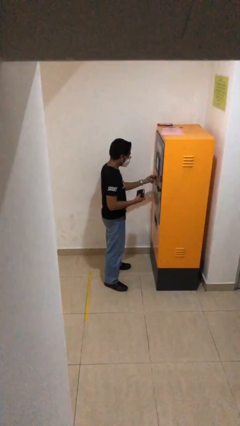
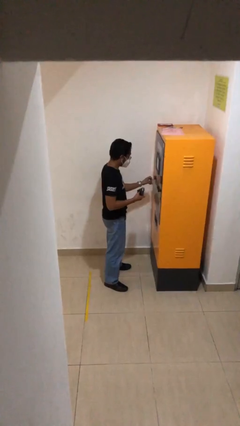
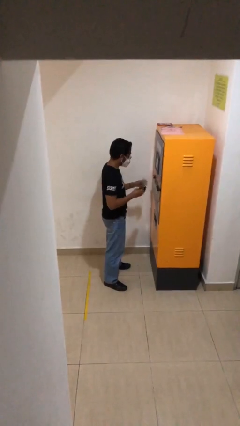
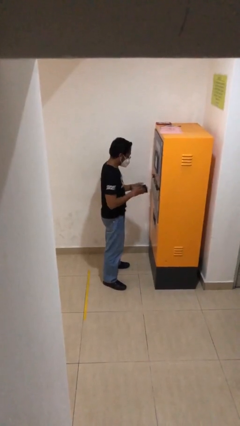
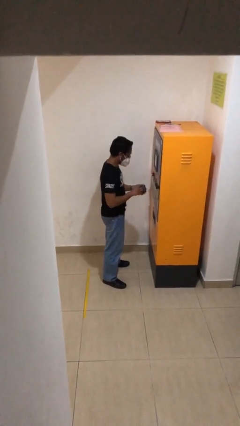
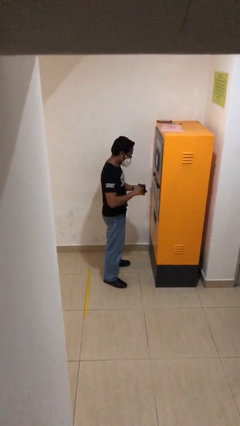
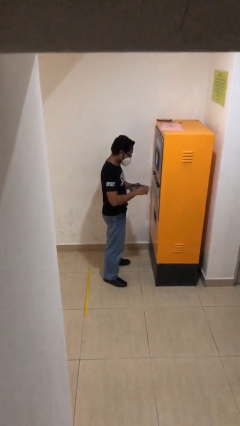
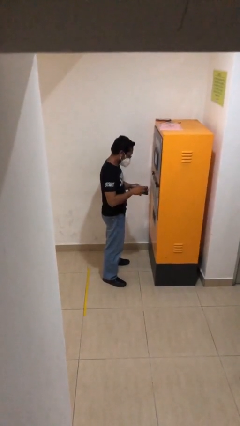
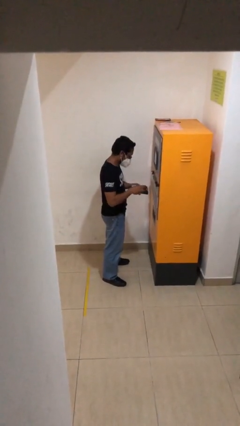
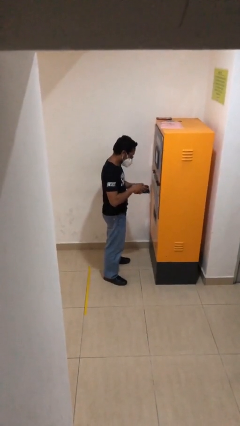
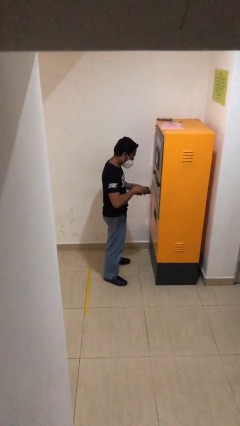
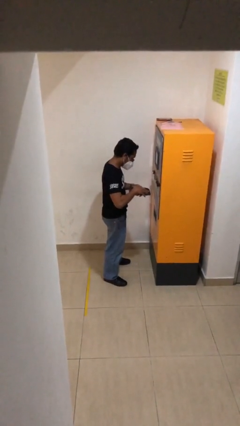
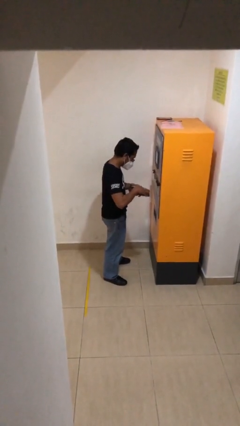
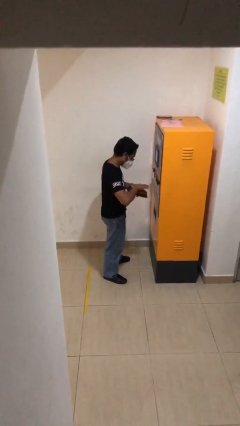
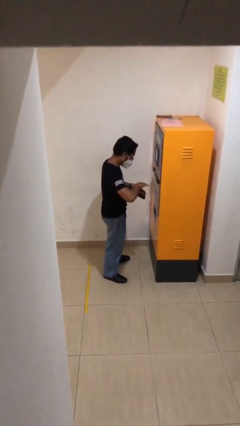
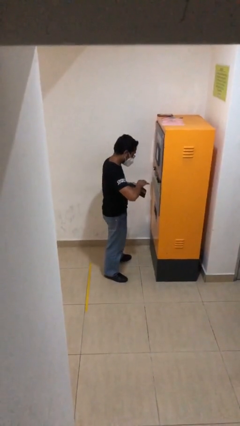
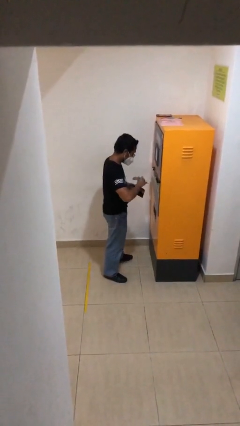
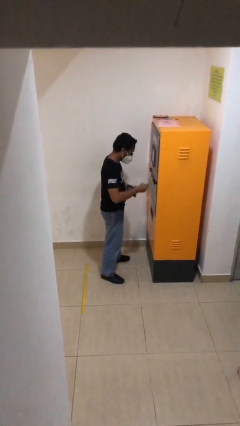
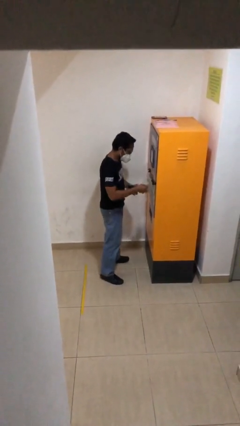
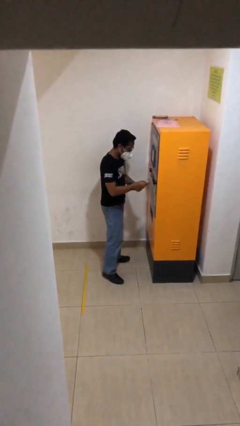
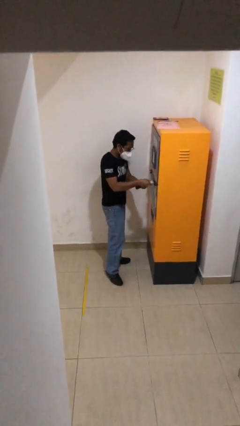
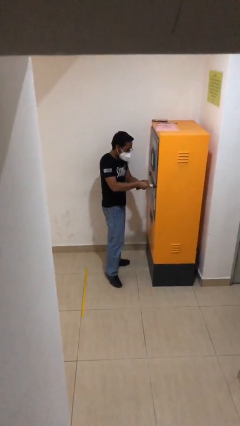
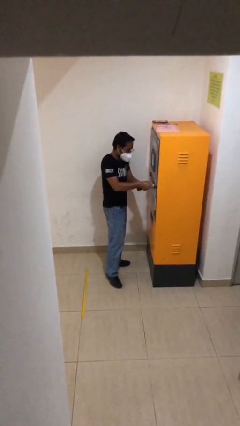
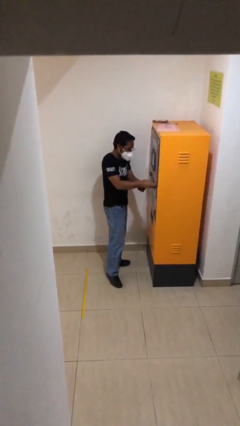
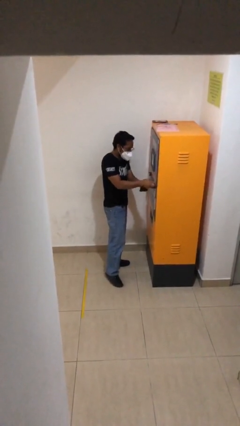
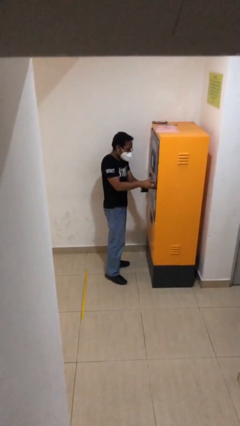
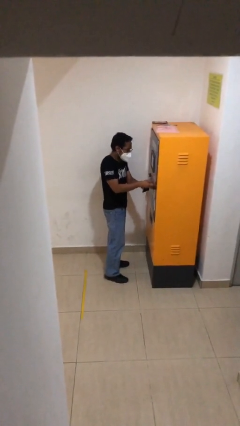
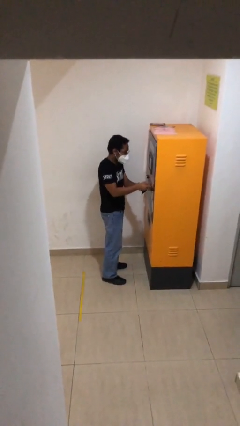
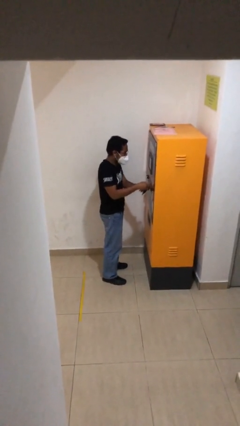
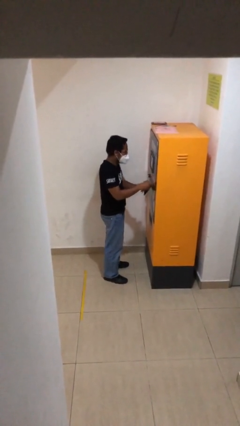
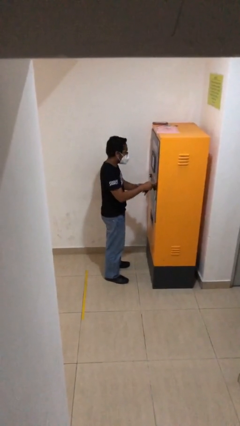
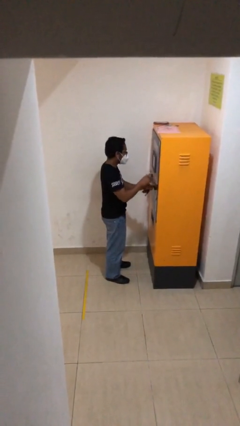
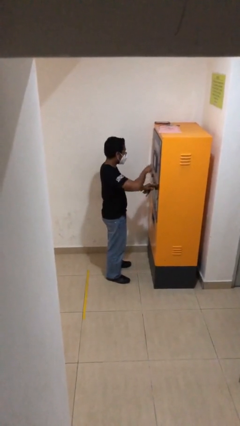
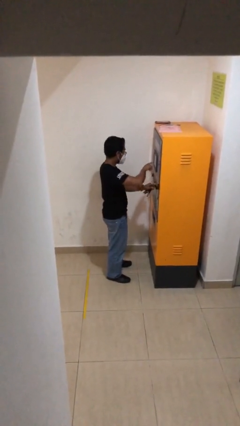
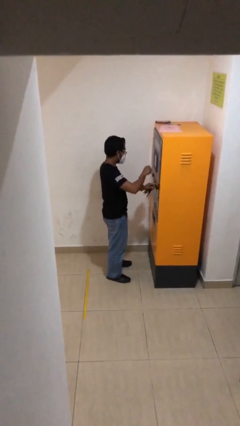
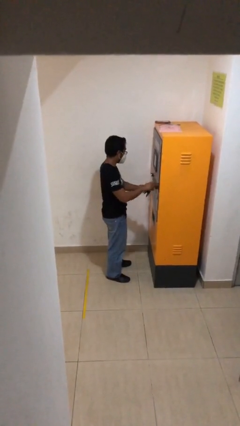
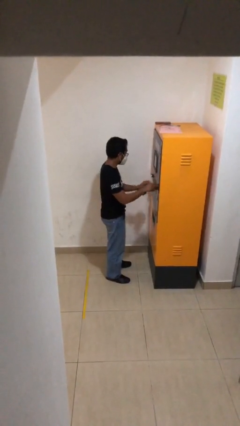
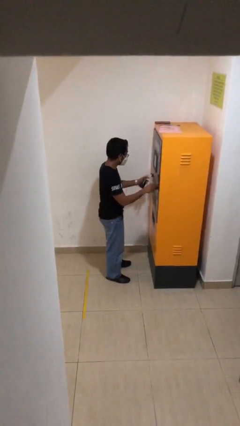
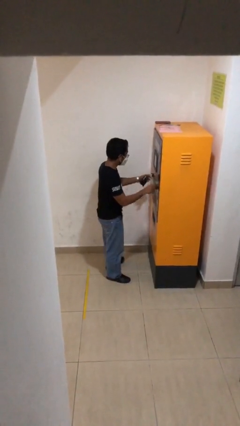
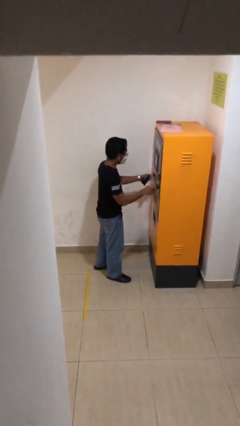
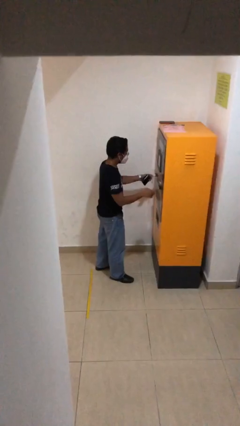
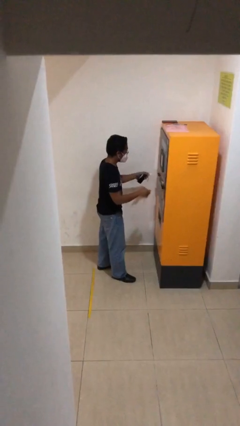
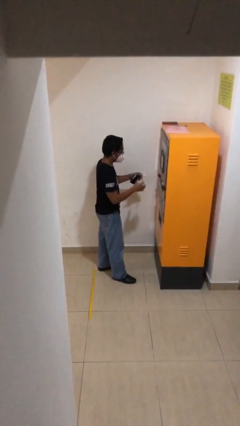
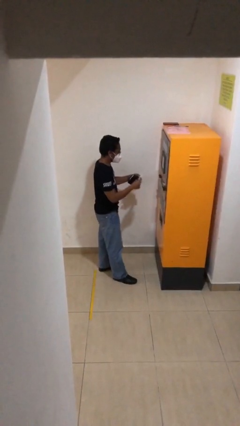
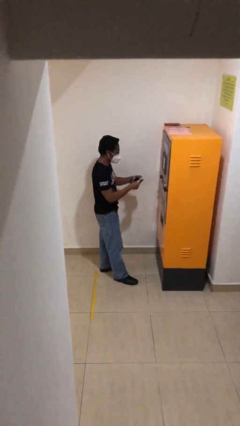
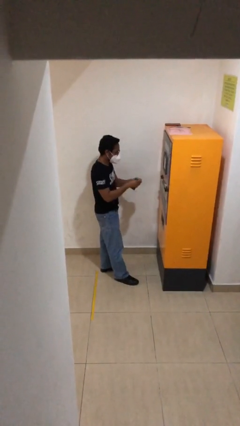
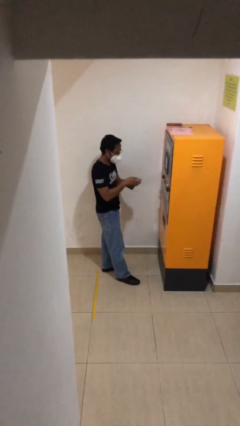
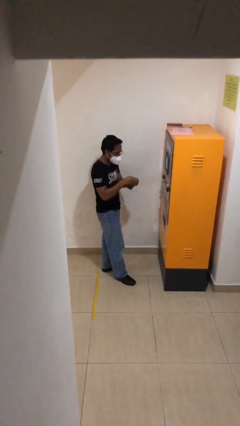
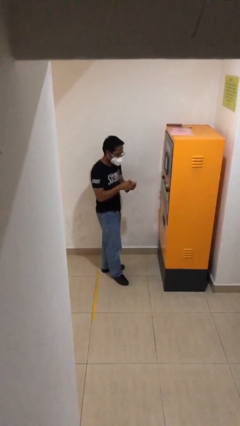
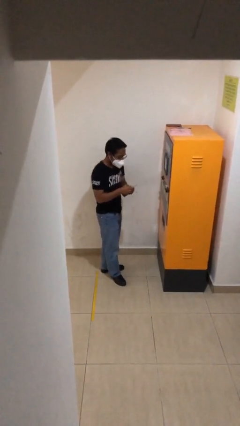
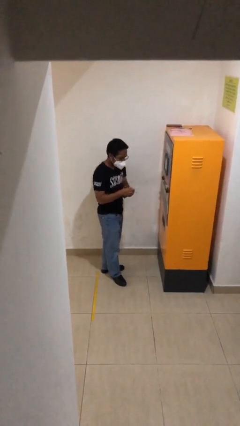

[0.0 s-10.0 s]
person purchases from machine

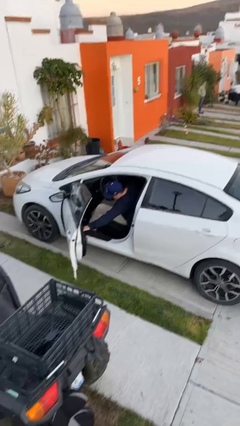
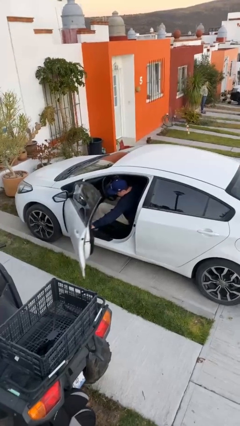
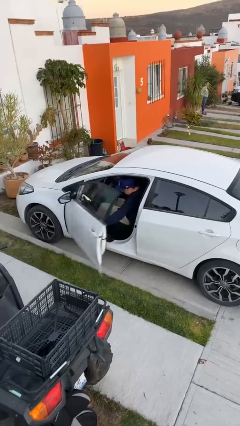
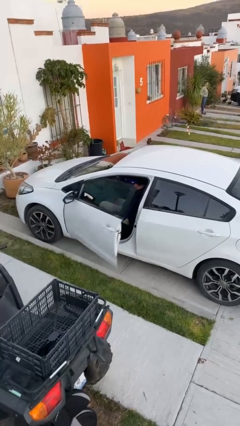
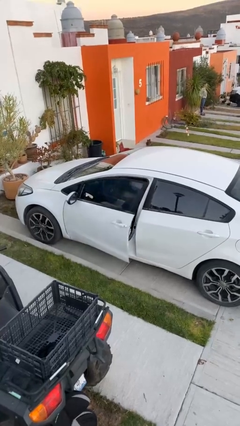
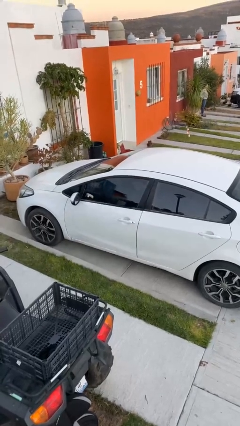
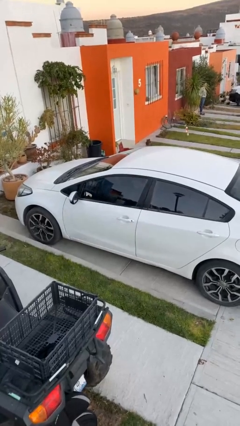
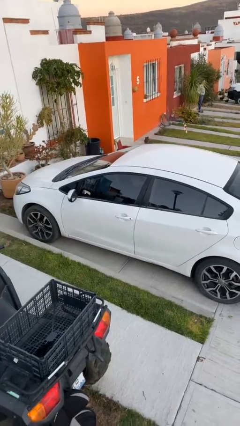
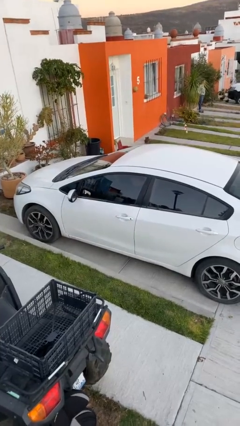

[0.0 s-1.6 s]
person closes car door

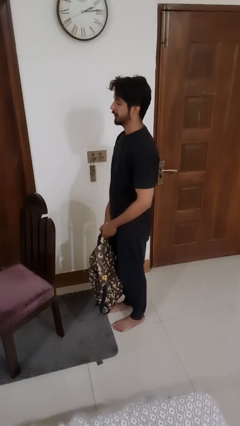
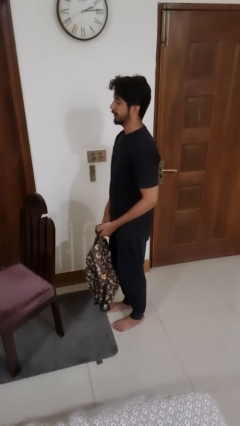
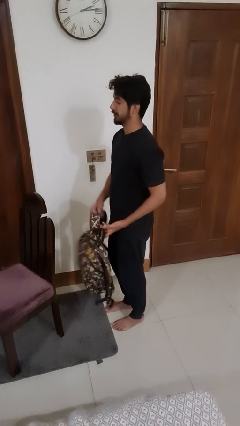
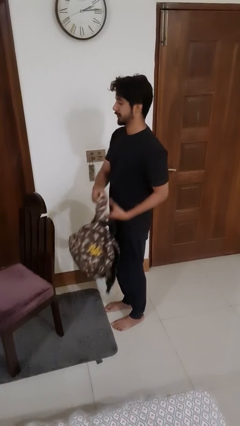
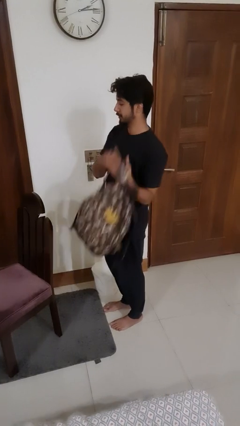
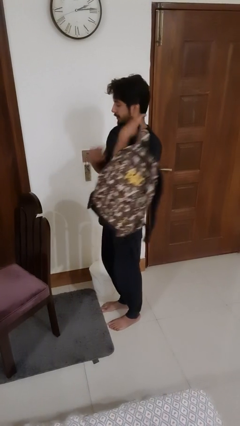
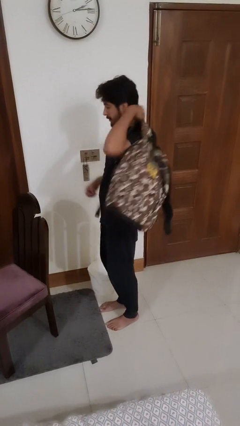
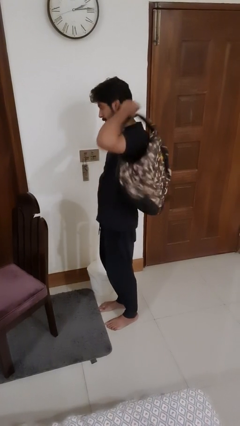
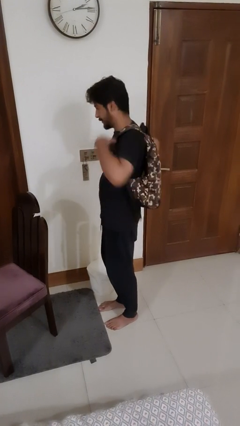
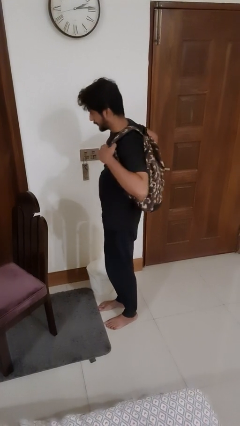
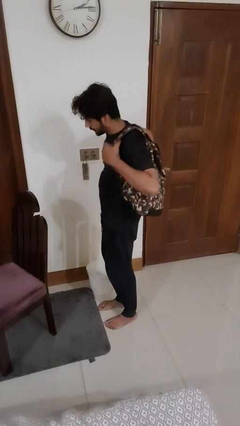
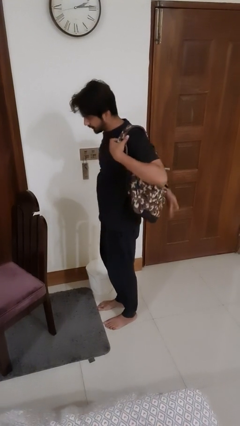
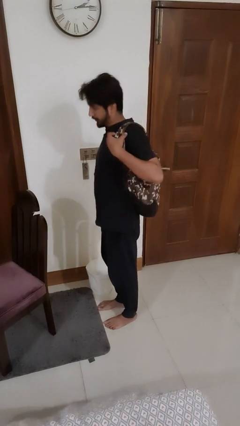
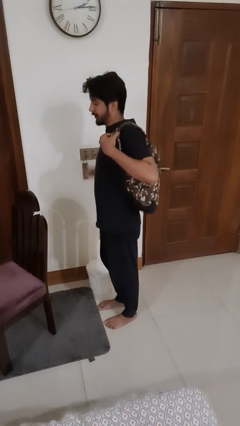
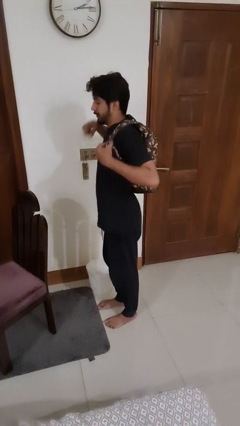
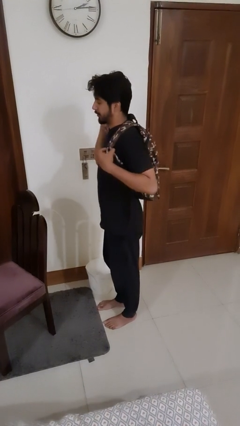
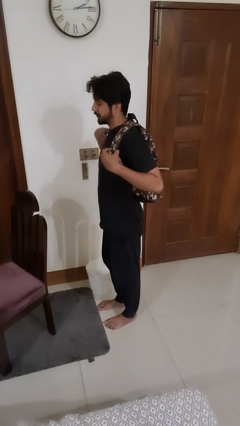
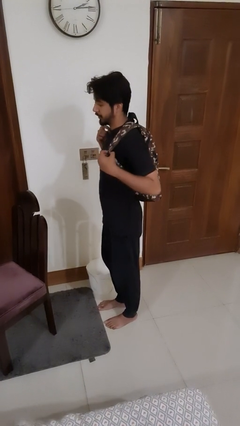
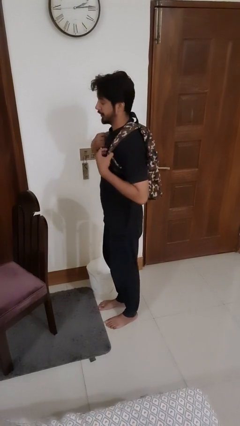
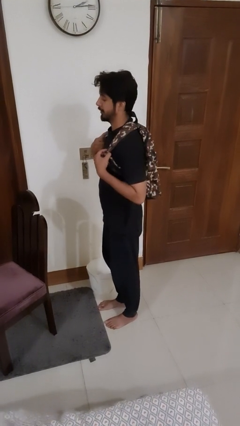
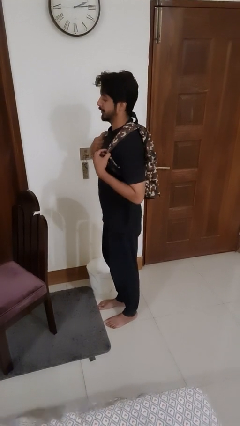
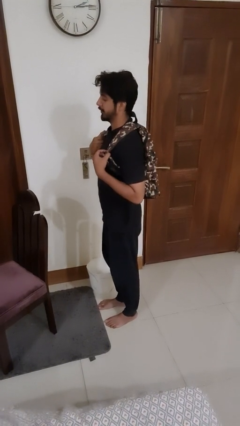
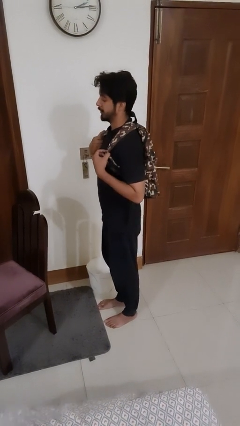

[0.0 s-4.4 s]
person puts on backpack

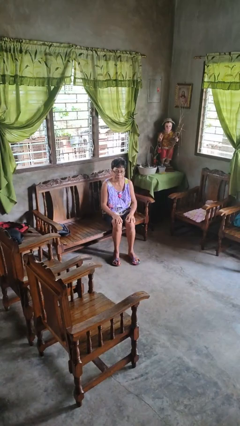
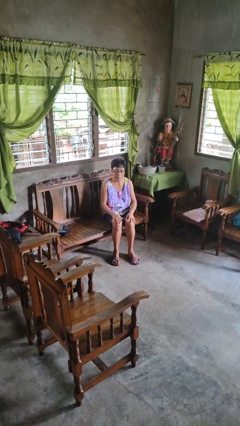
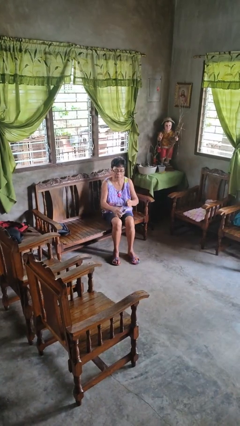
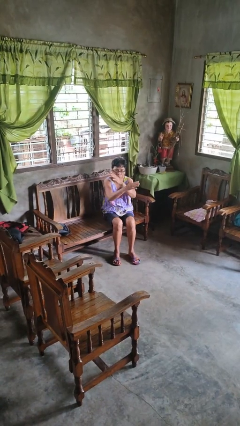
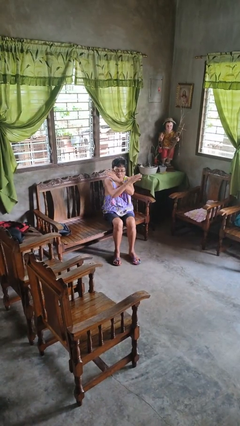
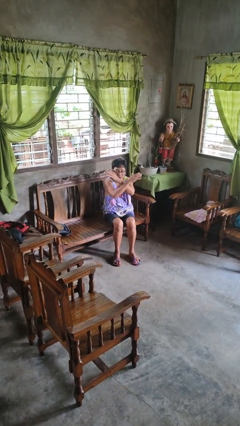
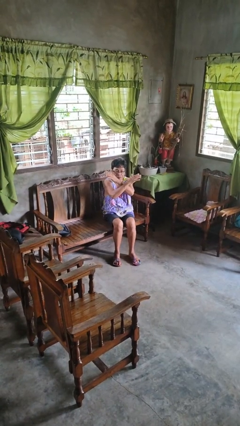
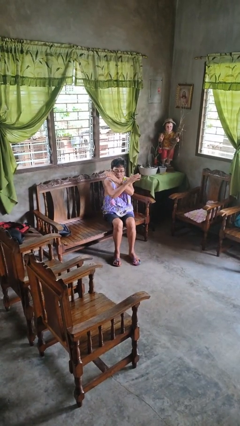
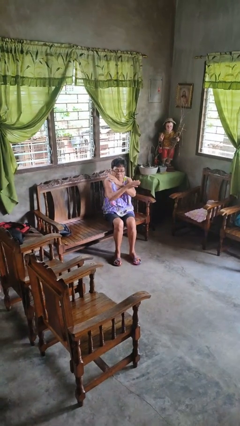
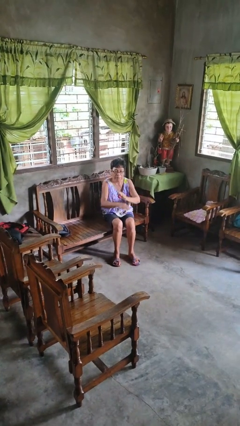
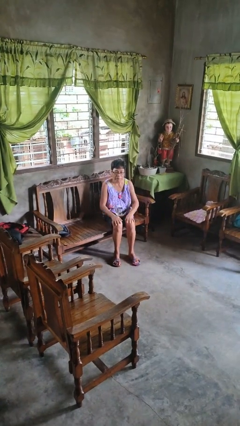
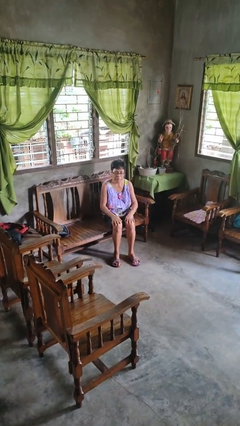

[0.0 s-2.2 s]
person gestures arms x
